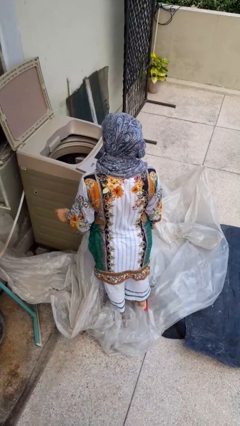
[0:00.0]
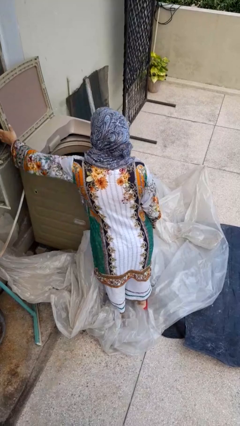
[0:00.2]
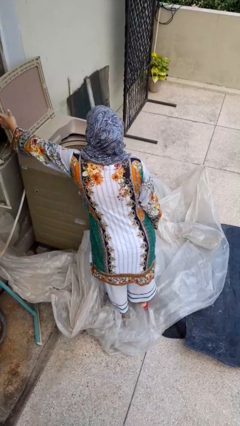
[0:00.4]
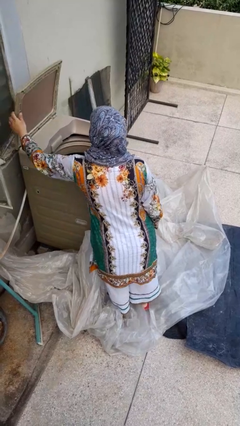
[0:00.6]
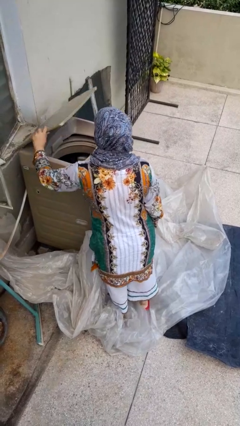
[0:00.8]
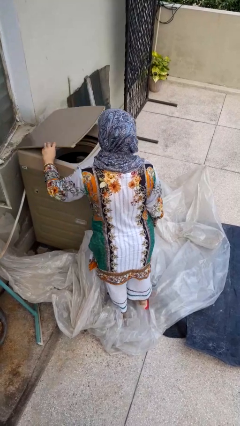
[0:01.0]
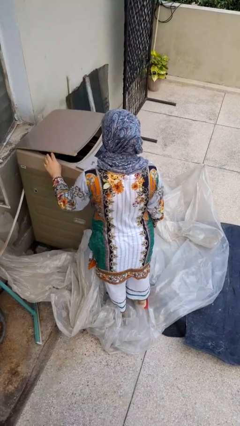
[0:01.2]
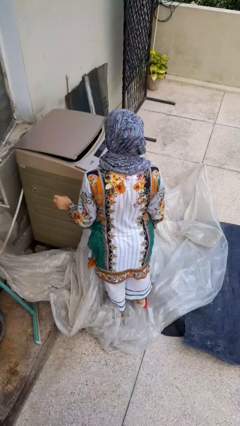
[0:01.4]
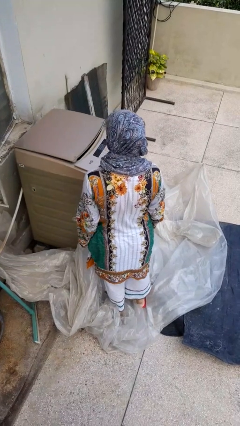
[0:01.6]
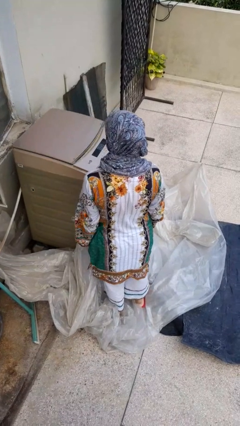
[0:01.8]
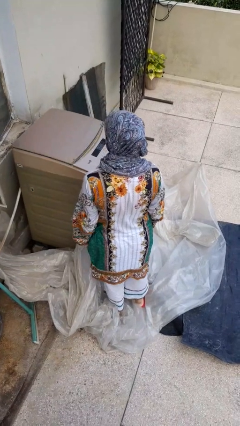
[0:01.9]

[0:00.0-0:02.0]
person closes clothes washer

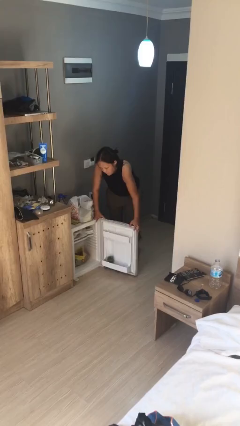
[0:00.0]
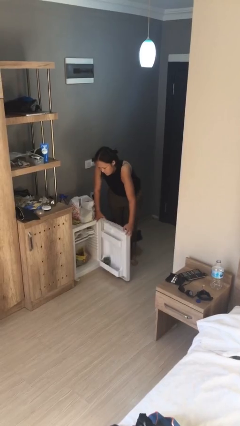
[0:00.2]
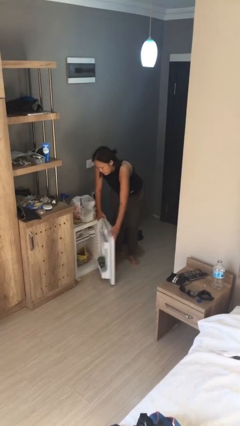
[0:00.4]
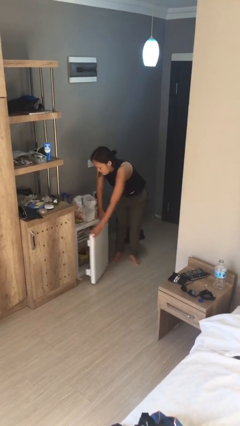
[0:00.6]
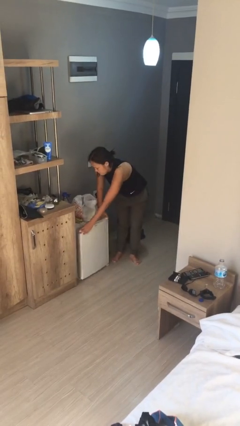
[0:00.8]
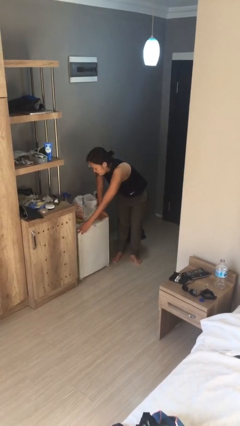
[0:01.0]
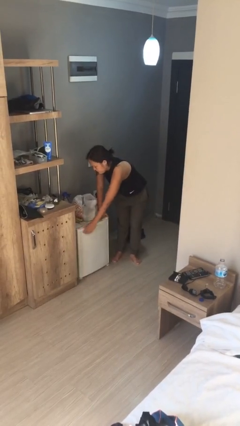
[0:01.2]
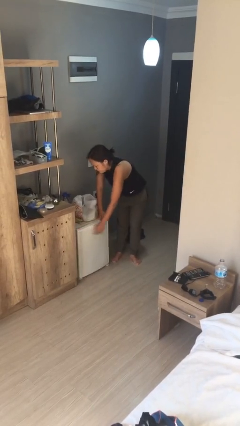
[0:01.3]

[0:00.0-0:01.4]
person closes refrigerator

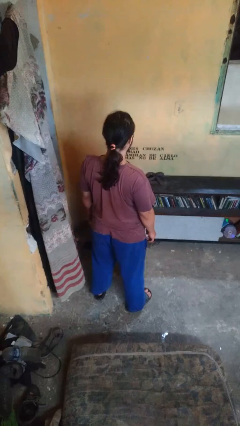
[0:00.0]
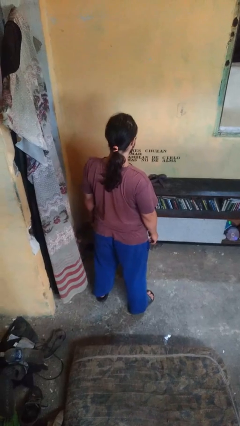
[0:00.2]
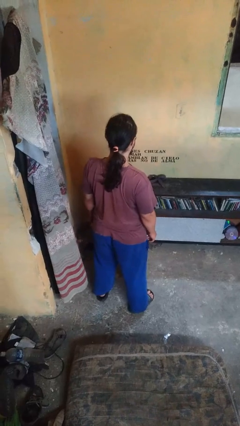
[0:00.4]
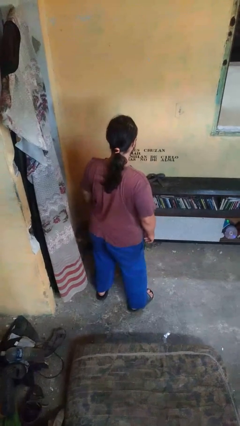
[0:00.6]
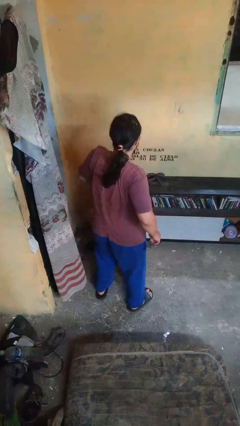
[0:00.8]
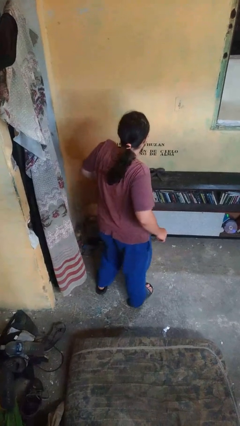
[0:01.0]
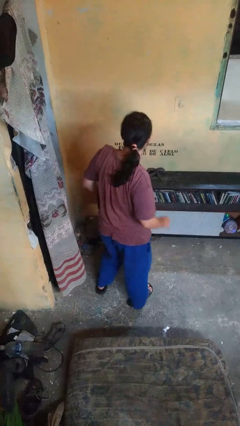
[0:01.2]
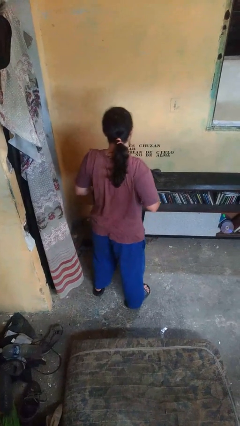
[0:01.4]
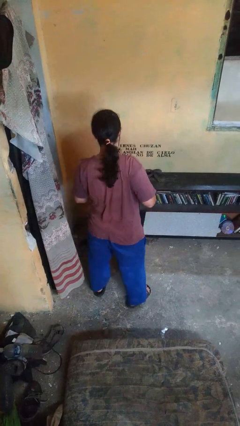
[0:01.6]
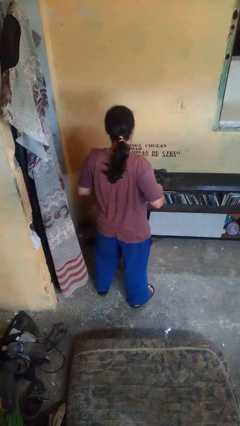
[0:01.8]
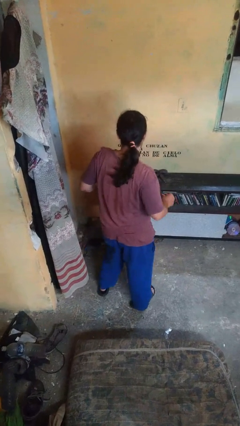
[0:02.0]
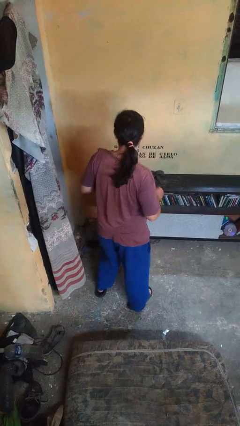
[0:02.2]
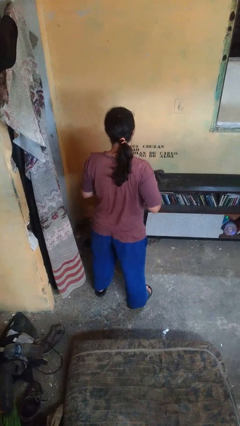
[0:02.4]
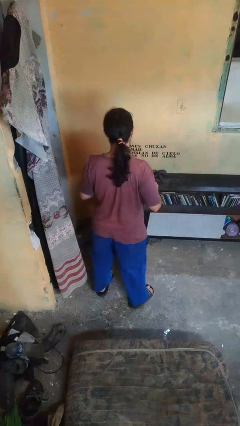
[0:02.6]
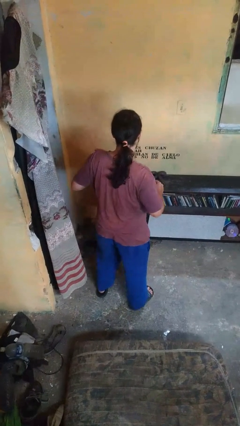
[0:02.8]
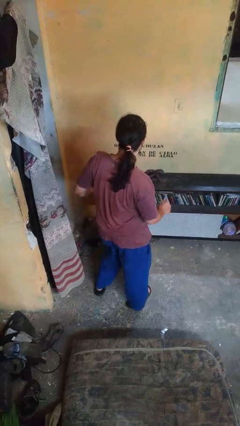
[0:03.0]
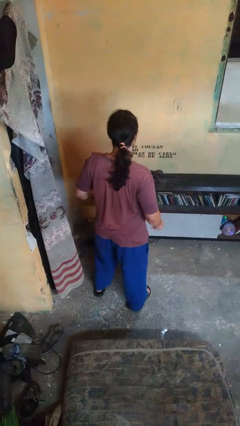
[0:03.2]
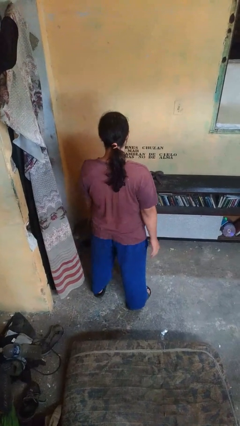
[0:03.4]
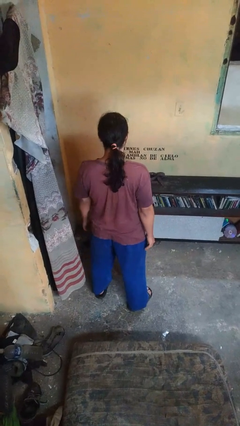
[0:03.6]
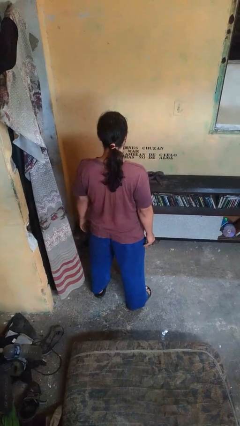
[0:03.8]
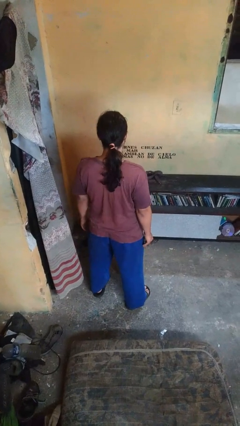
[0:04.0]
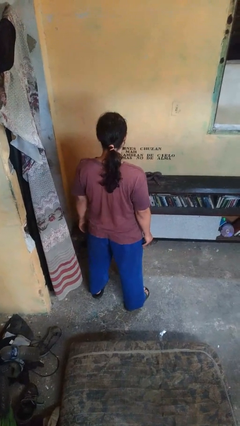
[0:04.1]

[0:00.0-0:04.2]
person dances in place

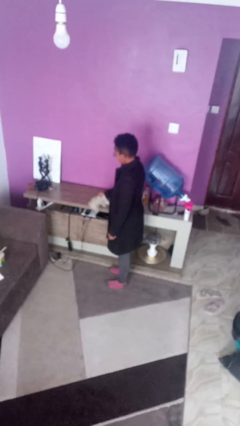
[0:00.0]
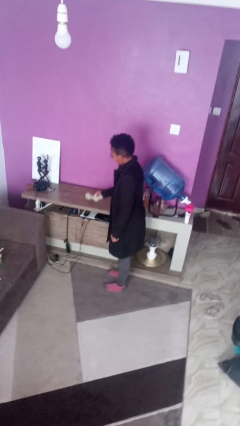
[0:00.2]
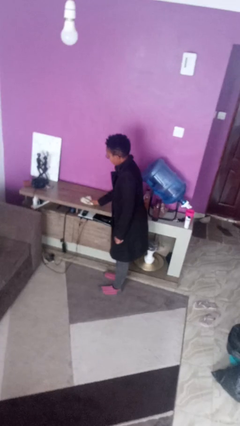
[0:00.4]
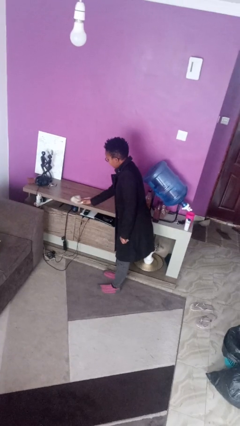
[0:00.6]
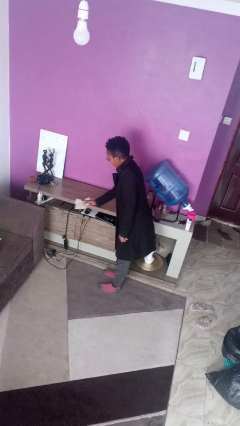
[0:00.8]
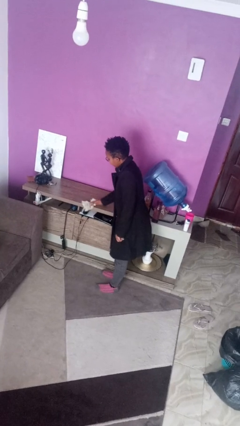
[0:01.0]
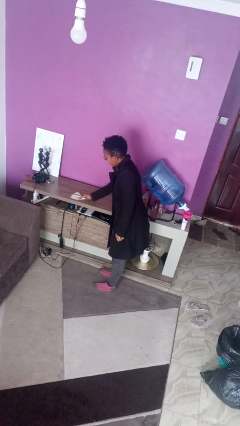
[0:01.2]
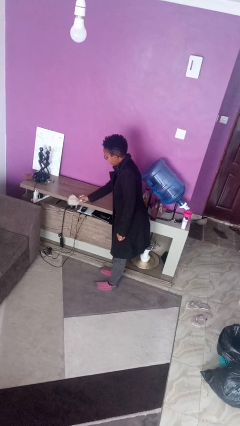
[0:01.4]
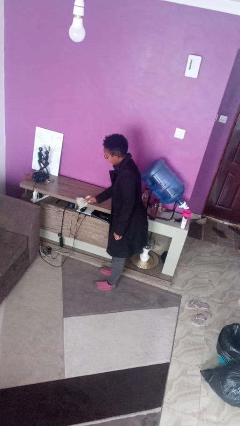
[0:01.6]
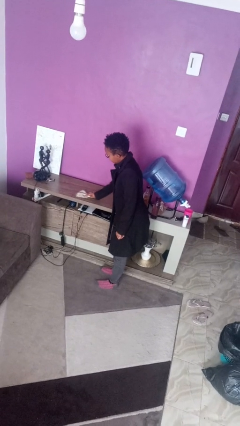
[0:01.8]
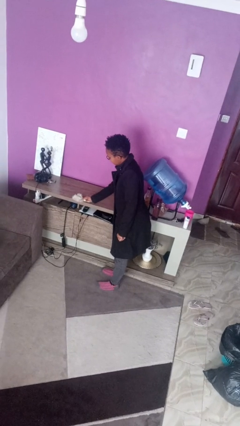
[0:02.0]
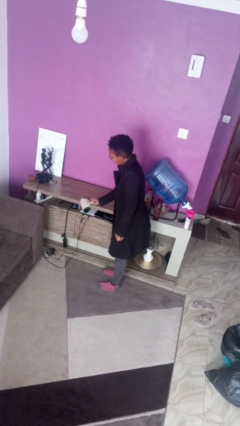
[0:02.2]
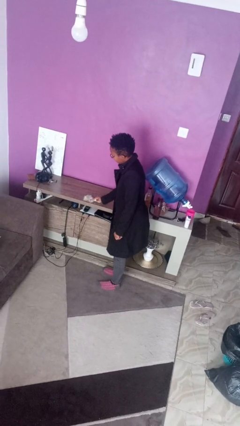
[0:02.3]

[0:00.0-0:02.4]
person cleans table with rag

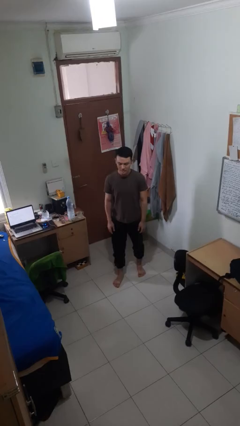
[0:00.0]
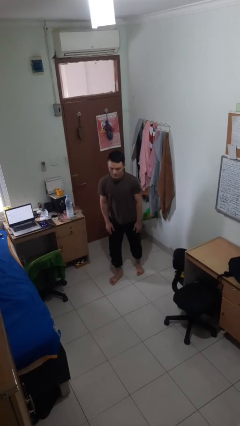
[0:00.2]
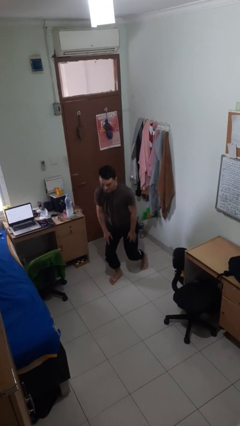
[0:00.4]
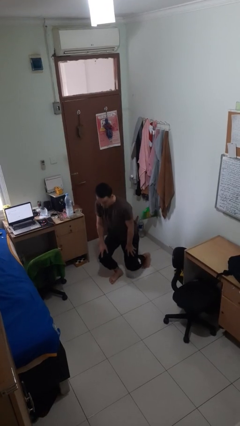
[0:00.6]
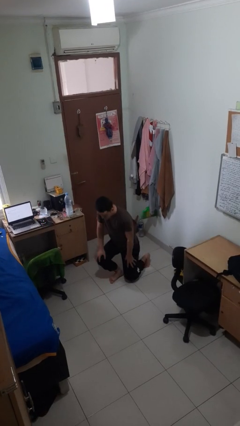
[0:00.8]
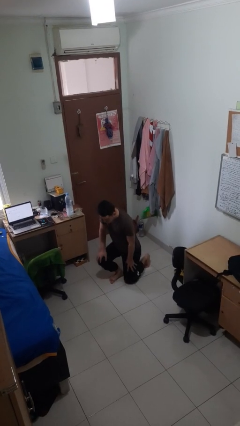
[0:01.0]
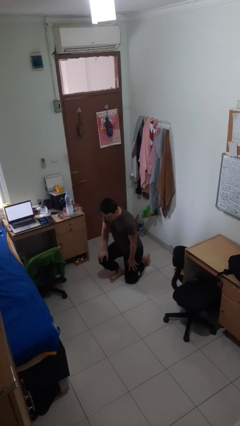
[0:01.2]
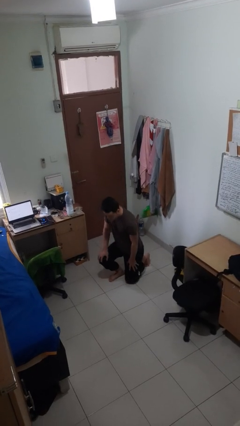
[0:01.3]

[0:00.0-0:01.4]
person kneels

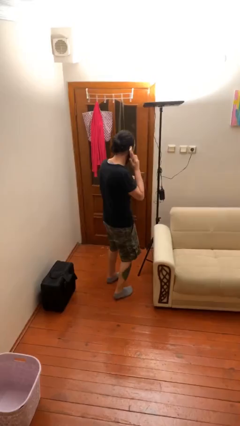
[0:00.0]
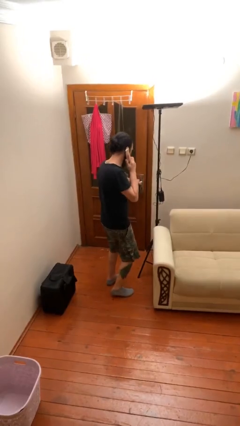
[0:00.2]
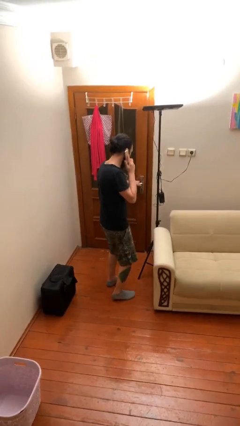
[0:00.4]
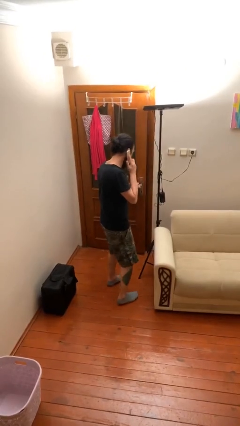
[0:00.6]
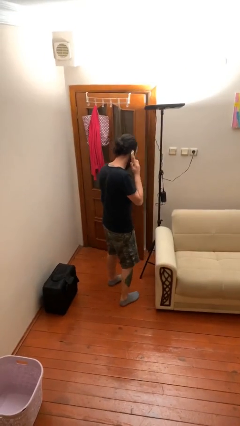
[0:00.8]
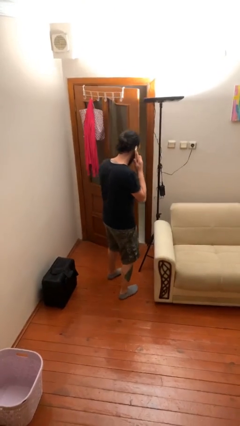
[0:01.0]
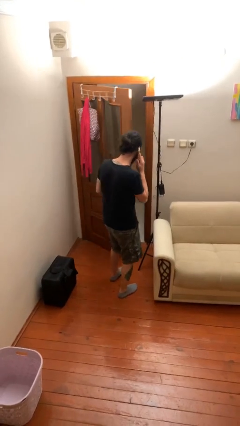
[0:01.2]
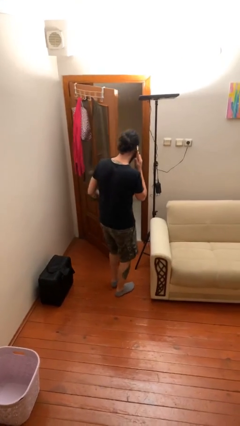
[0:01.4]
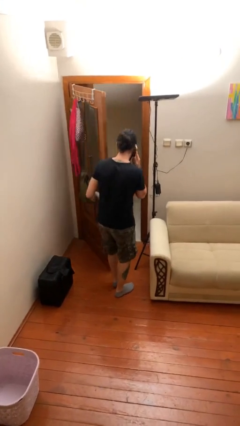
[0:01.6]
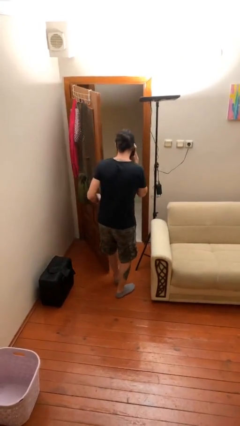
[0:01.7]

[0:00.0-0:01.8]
person opens facility door

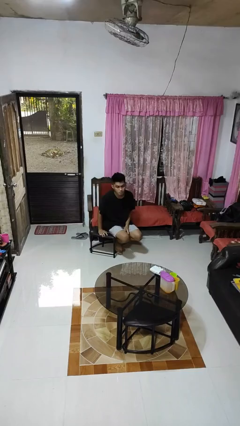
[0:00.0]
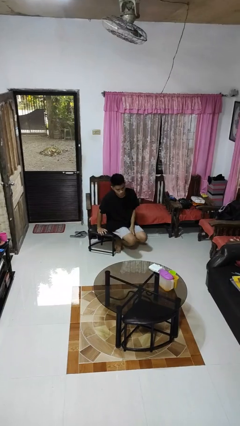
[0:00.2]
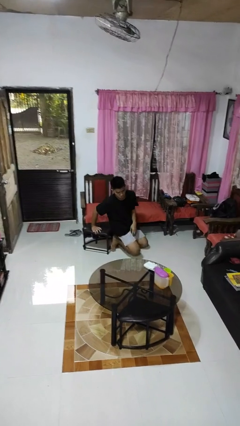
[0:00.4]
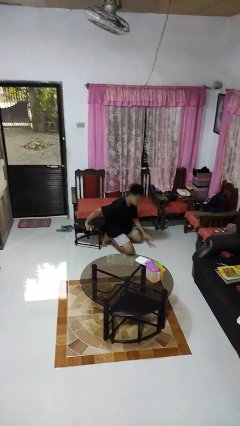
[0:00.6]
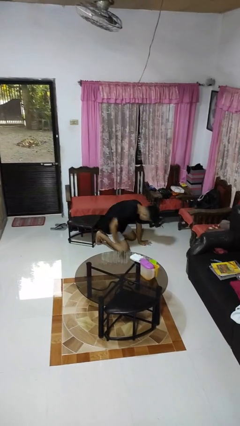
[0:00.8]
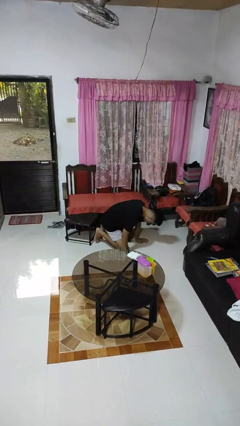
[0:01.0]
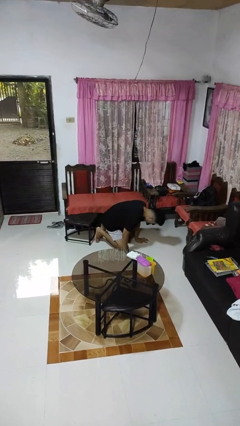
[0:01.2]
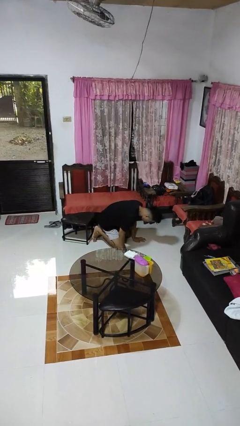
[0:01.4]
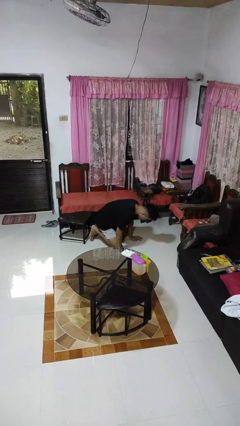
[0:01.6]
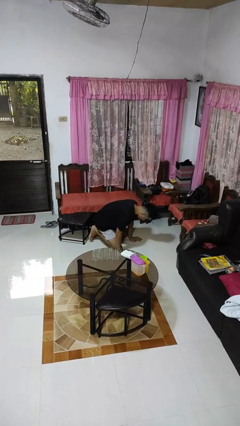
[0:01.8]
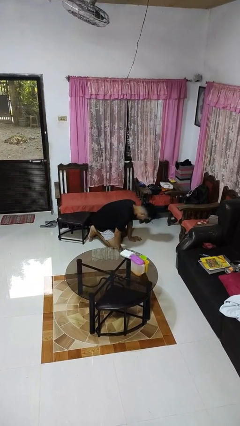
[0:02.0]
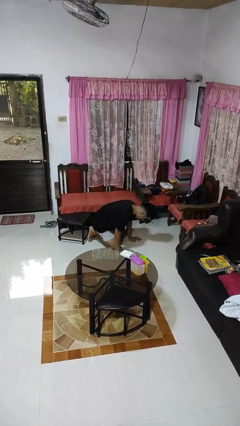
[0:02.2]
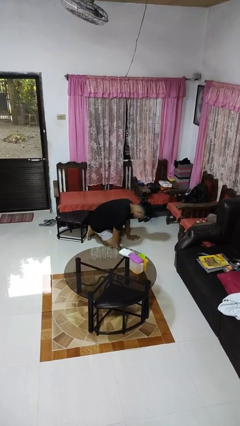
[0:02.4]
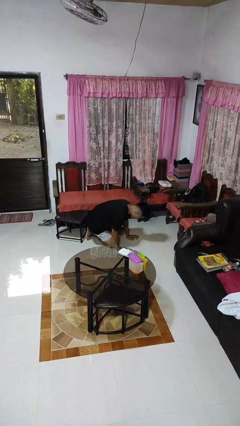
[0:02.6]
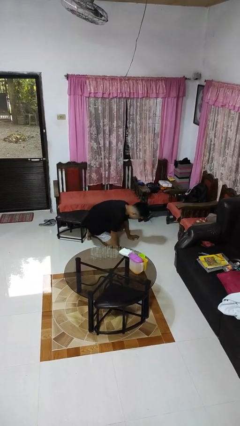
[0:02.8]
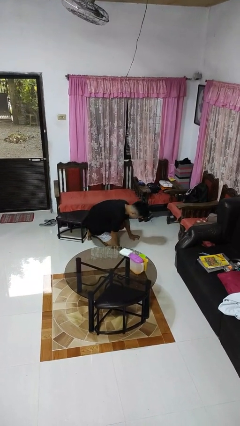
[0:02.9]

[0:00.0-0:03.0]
person falls from chair

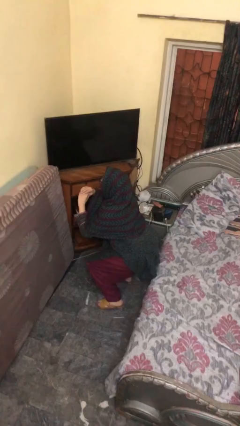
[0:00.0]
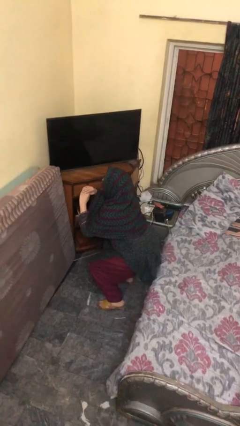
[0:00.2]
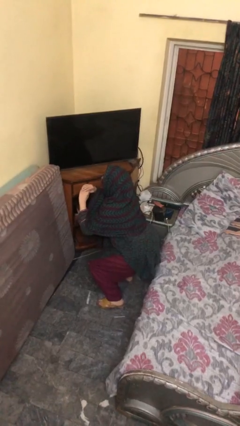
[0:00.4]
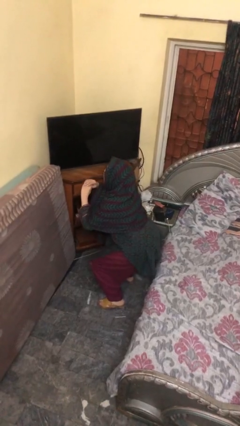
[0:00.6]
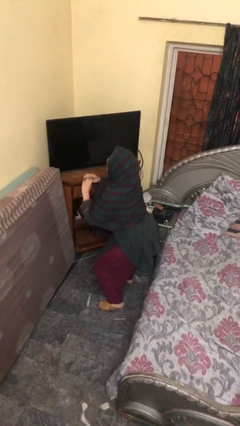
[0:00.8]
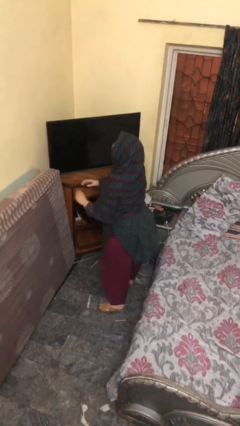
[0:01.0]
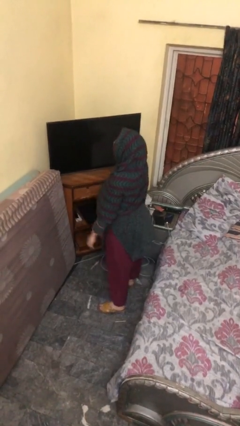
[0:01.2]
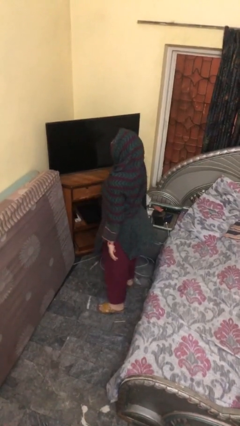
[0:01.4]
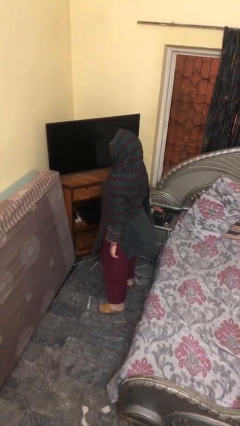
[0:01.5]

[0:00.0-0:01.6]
person stands up
